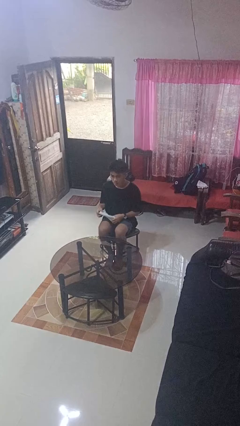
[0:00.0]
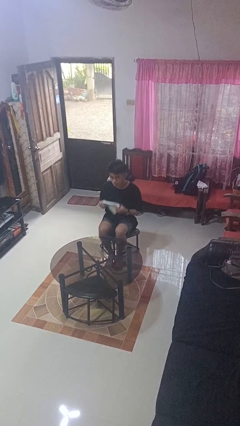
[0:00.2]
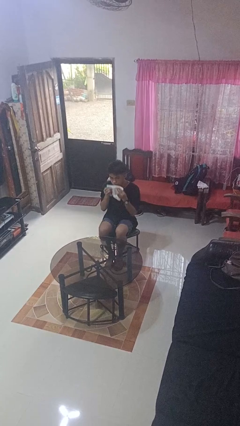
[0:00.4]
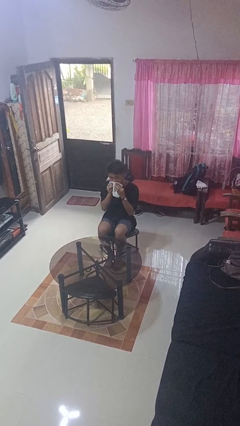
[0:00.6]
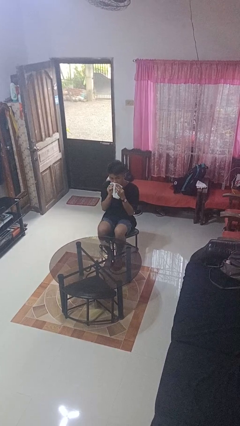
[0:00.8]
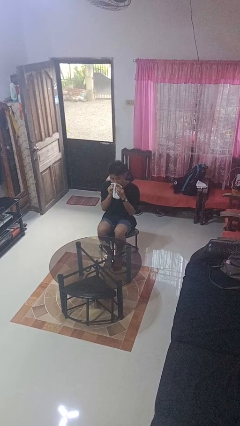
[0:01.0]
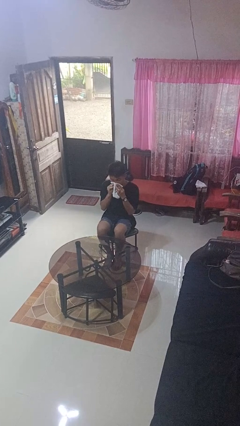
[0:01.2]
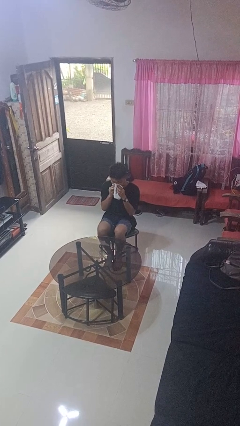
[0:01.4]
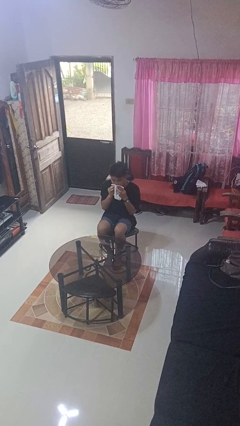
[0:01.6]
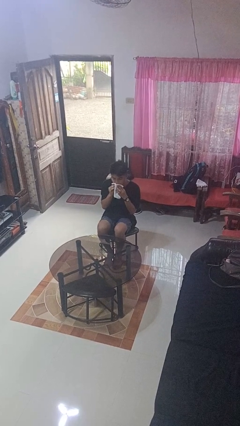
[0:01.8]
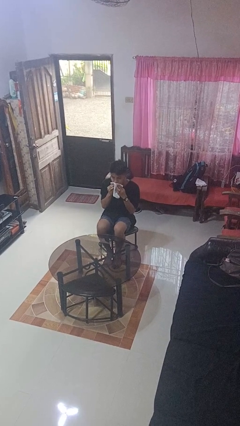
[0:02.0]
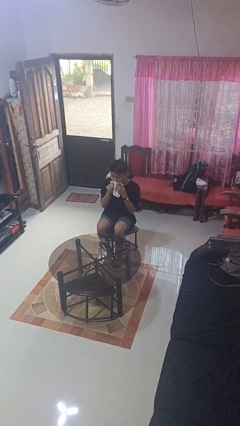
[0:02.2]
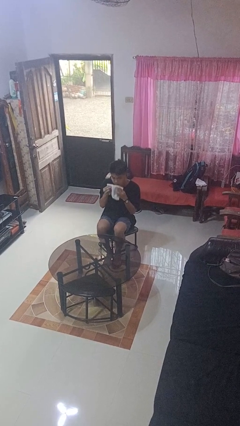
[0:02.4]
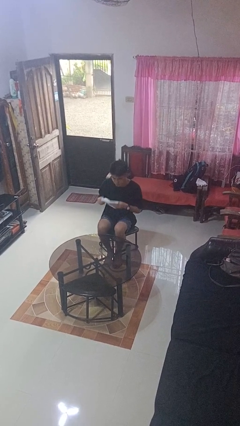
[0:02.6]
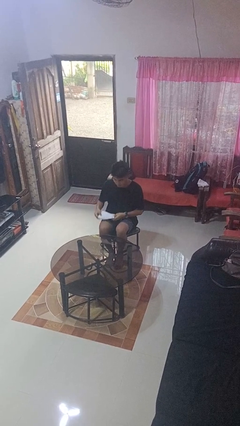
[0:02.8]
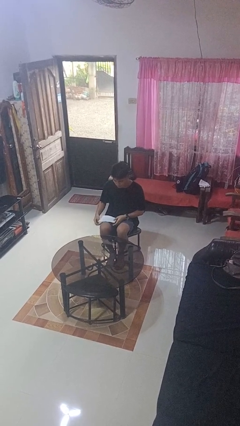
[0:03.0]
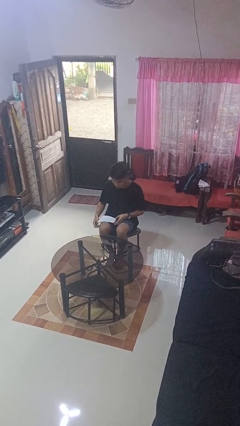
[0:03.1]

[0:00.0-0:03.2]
person wipes mouth with napkin

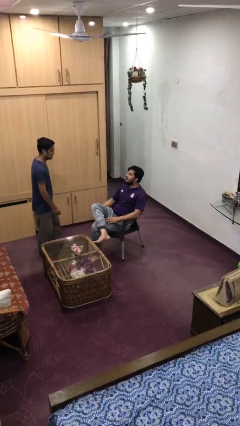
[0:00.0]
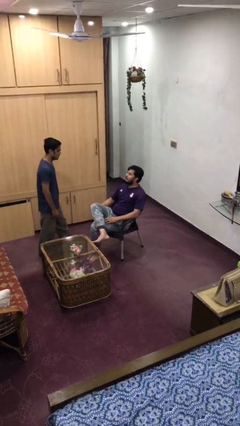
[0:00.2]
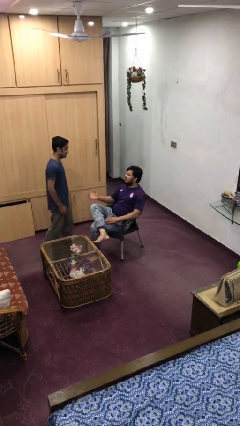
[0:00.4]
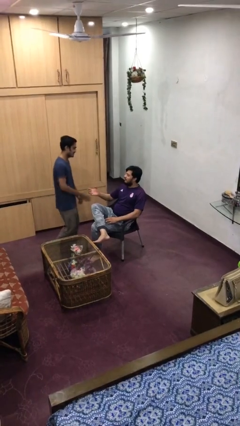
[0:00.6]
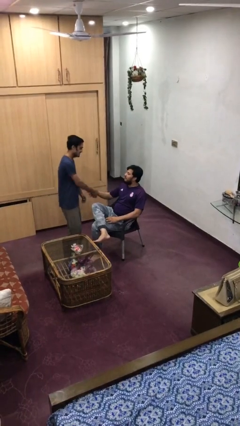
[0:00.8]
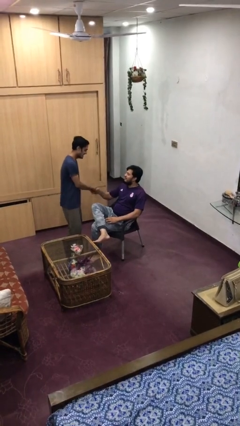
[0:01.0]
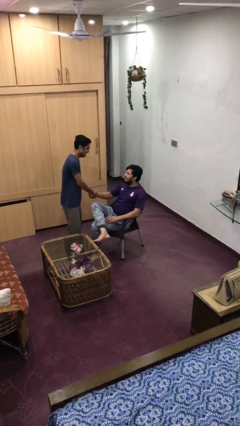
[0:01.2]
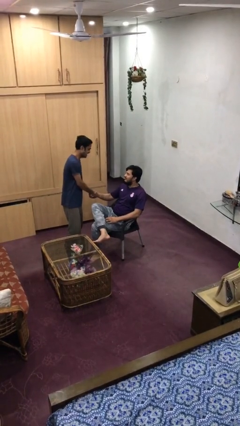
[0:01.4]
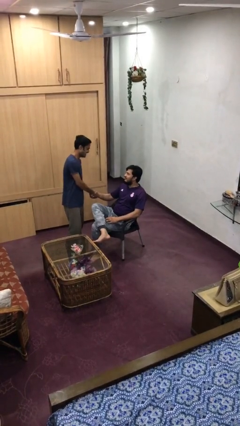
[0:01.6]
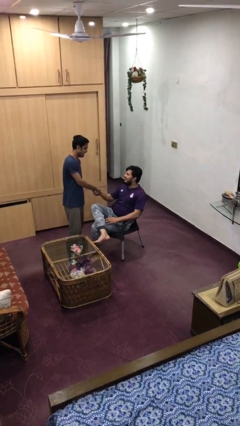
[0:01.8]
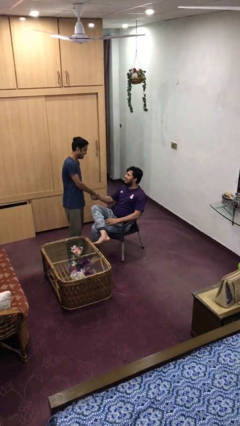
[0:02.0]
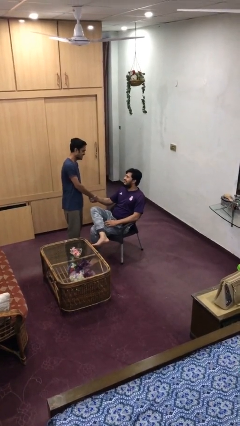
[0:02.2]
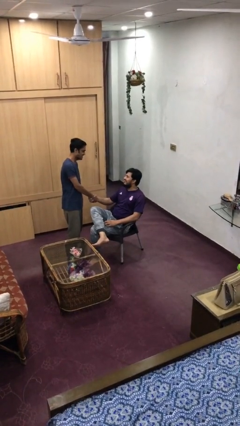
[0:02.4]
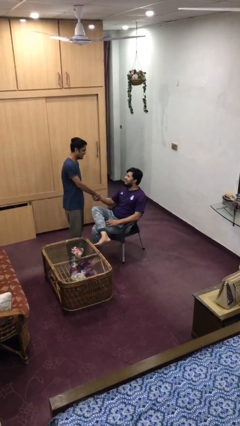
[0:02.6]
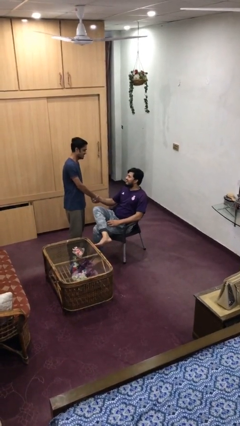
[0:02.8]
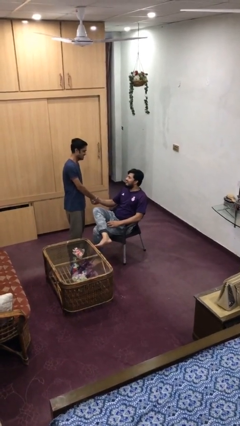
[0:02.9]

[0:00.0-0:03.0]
person shakes hand

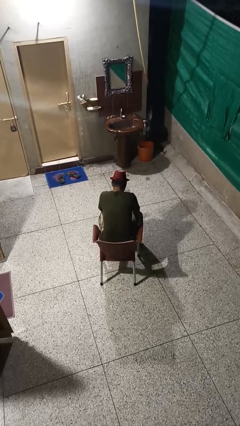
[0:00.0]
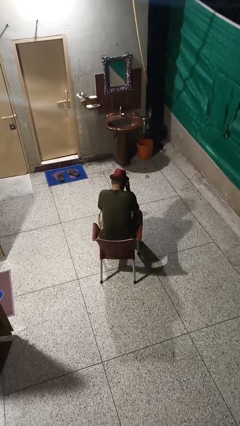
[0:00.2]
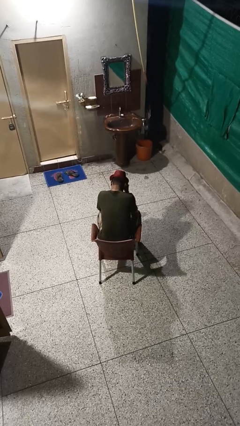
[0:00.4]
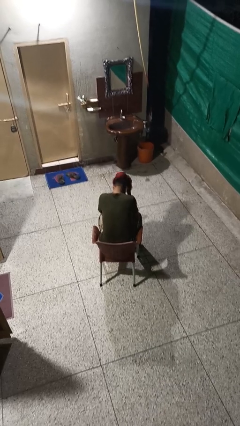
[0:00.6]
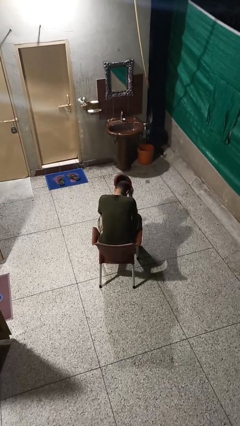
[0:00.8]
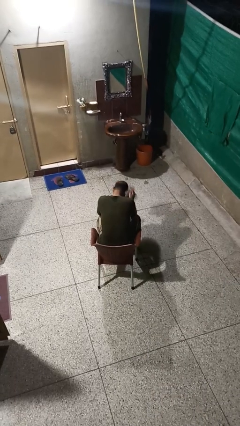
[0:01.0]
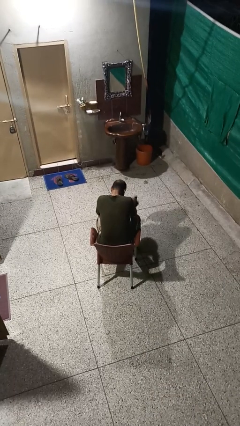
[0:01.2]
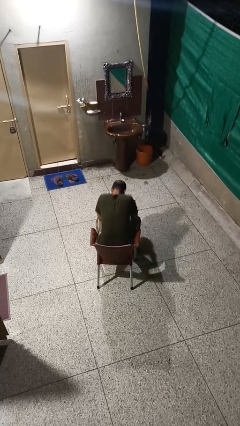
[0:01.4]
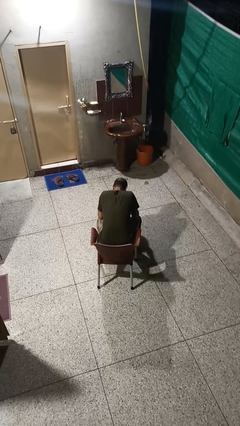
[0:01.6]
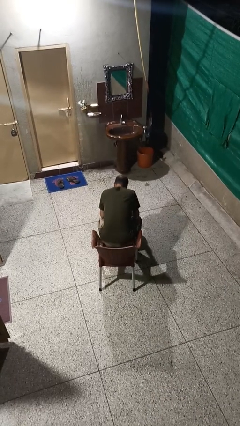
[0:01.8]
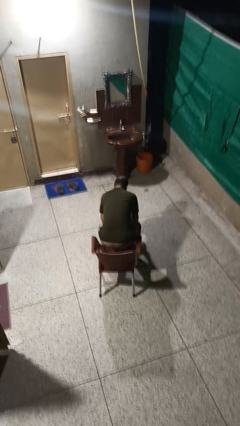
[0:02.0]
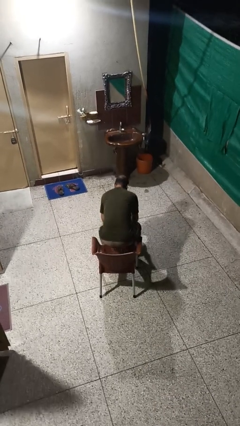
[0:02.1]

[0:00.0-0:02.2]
person takes off hat

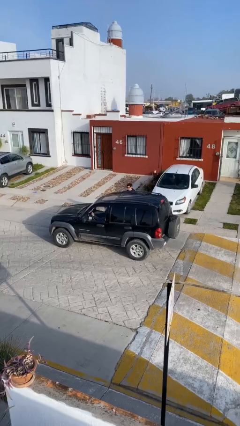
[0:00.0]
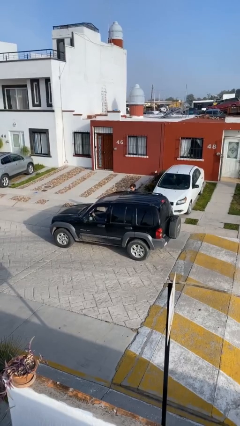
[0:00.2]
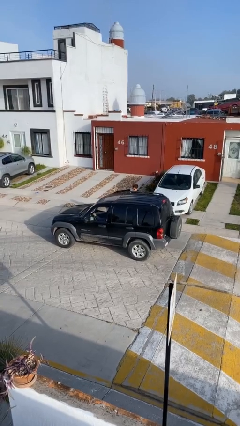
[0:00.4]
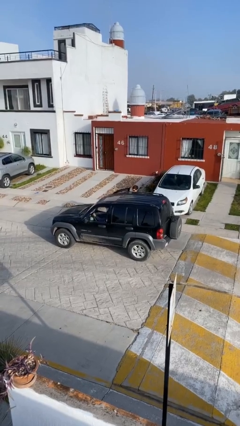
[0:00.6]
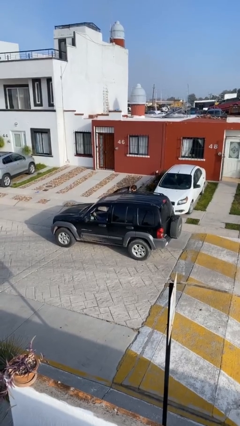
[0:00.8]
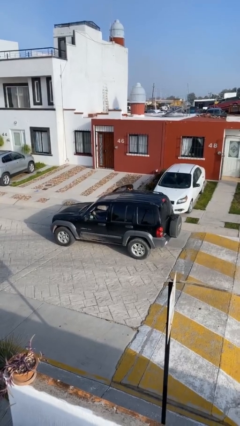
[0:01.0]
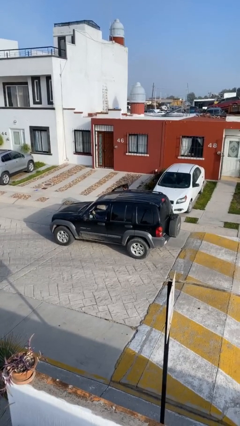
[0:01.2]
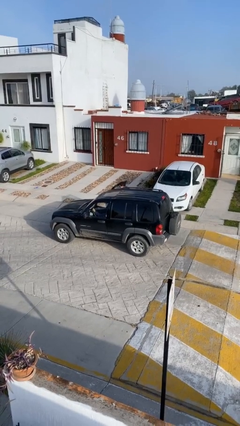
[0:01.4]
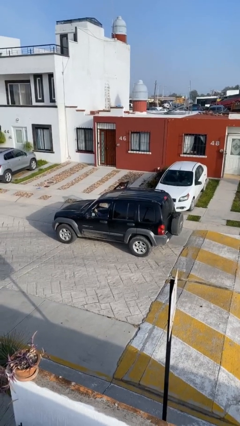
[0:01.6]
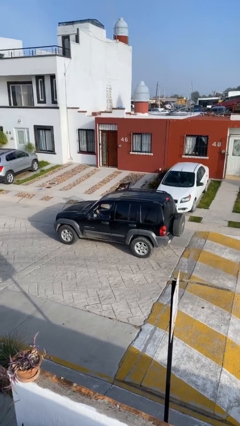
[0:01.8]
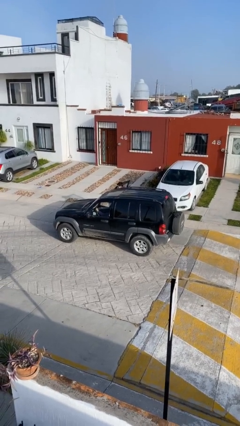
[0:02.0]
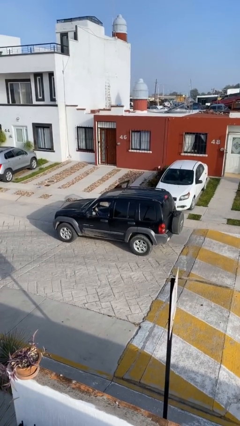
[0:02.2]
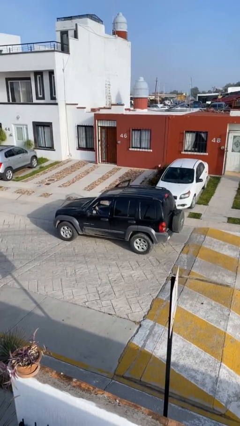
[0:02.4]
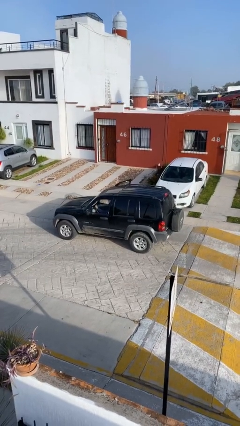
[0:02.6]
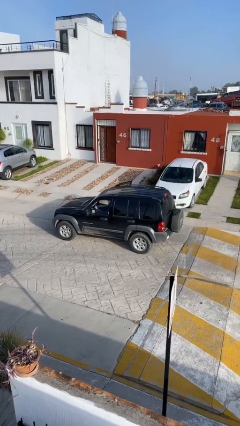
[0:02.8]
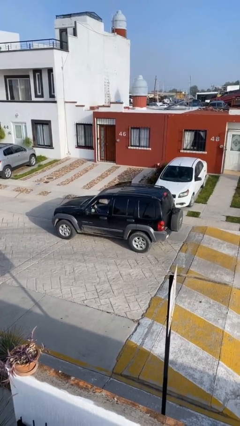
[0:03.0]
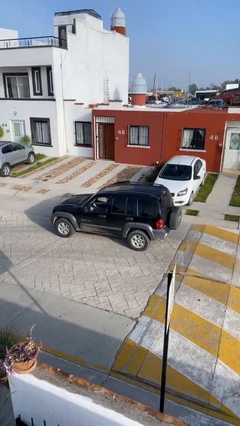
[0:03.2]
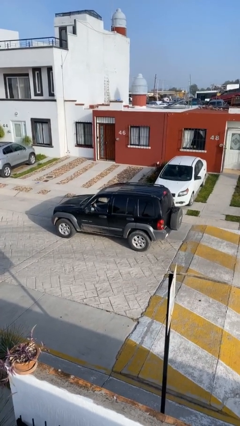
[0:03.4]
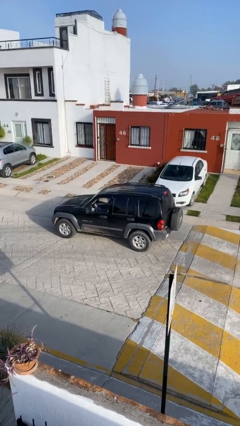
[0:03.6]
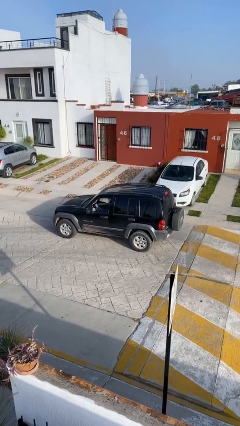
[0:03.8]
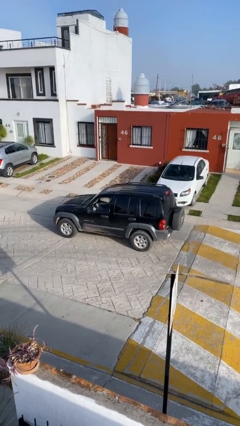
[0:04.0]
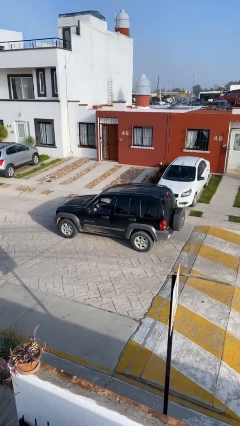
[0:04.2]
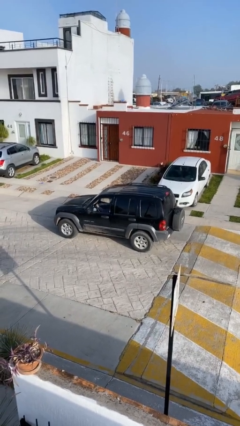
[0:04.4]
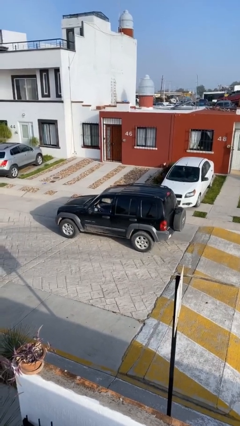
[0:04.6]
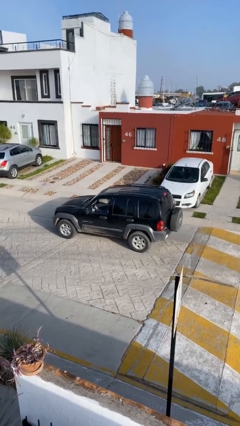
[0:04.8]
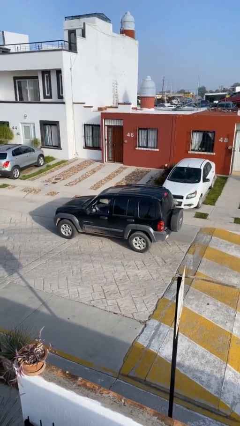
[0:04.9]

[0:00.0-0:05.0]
car picks up person

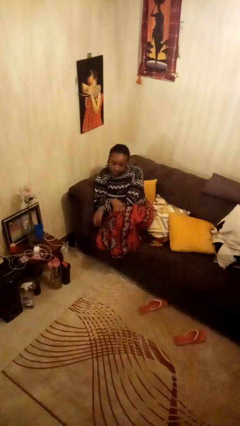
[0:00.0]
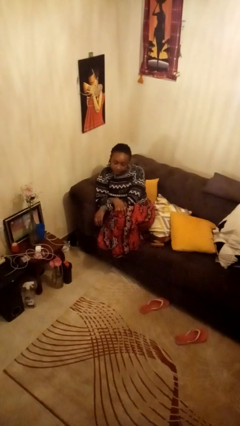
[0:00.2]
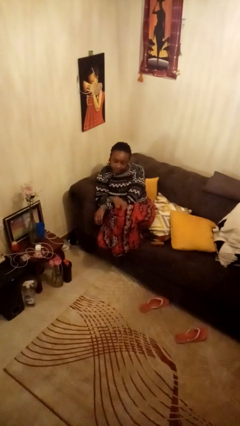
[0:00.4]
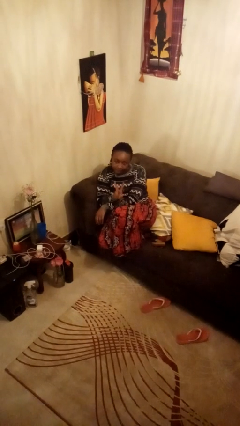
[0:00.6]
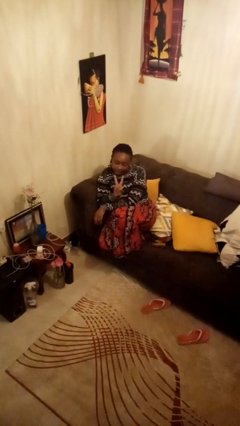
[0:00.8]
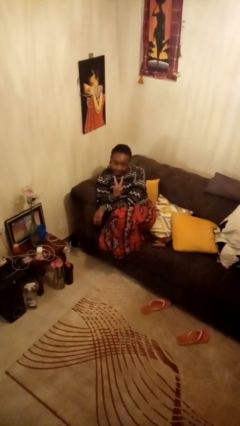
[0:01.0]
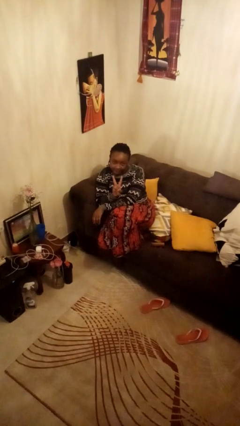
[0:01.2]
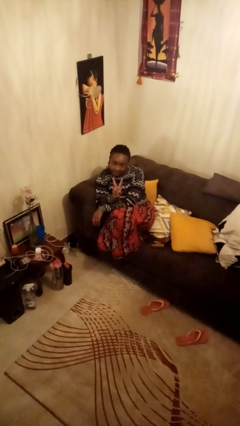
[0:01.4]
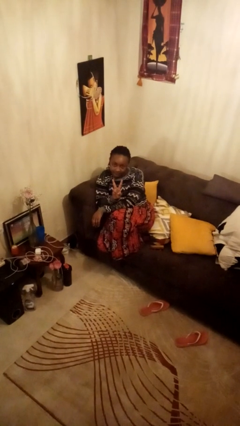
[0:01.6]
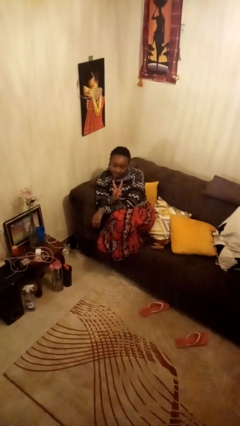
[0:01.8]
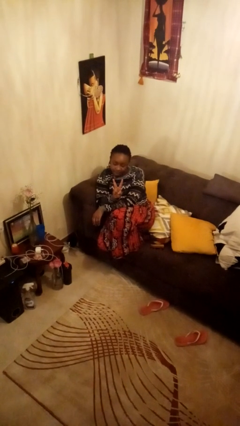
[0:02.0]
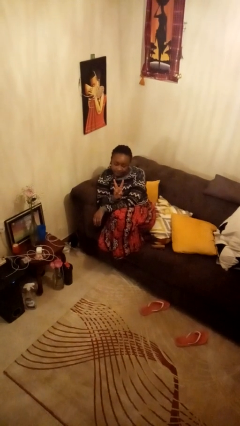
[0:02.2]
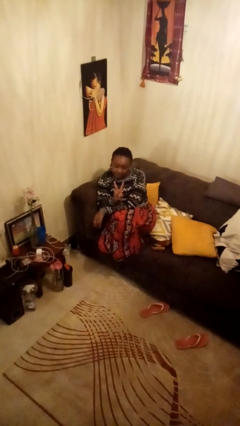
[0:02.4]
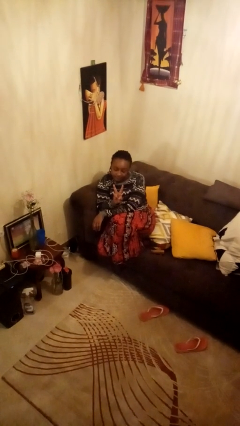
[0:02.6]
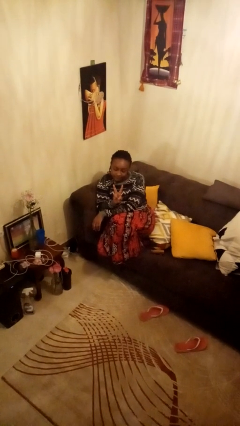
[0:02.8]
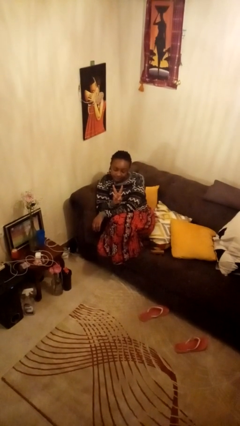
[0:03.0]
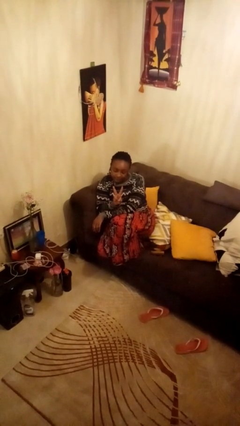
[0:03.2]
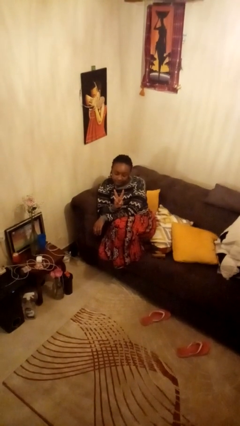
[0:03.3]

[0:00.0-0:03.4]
person gestures peace

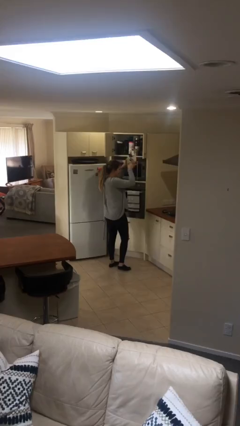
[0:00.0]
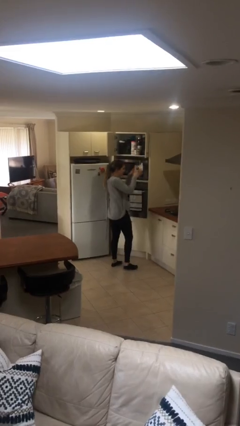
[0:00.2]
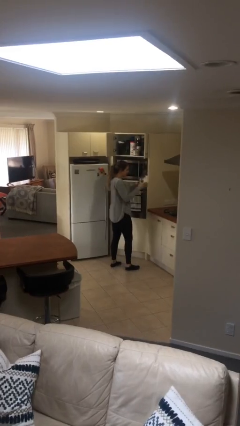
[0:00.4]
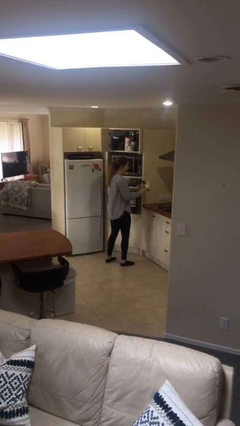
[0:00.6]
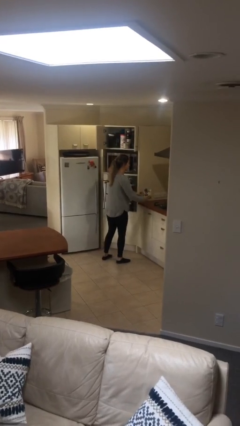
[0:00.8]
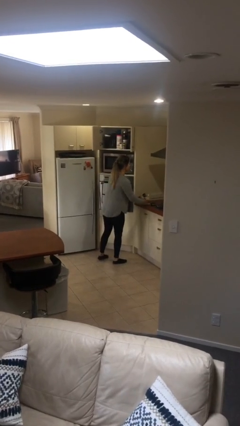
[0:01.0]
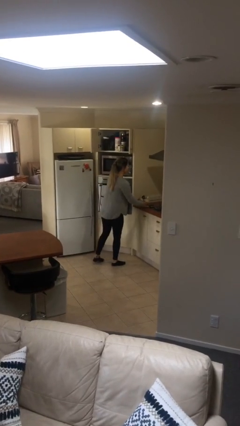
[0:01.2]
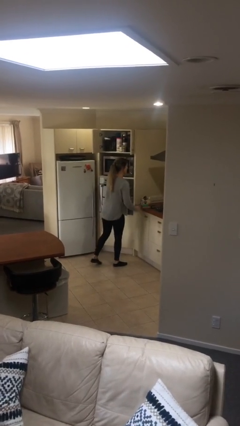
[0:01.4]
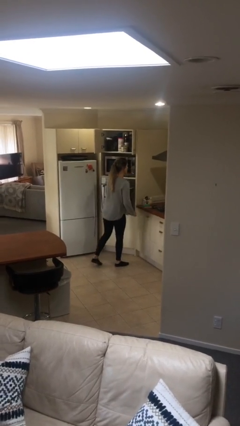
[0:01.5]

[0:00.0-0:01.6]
person puts down object on table
